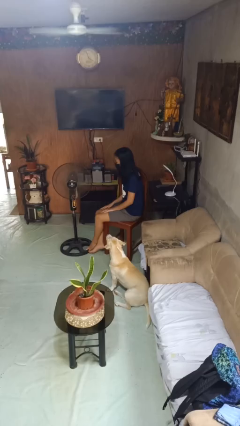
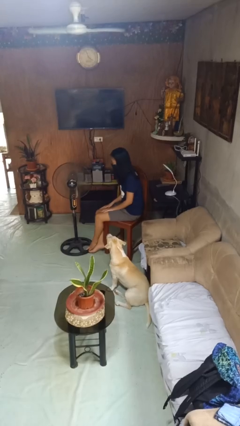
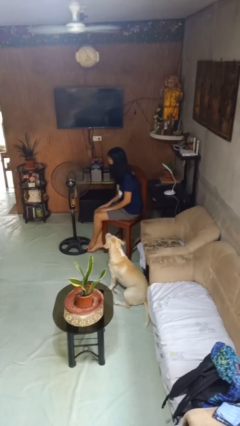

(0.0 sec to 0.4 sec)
person turns on fan

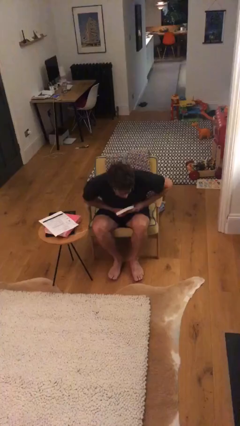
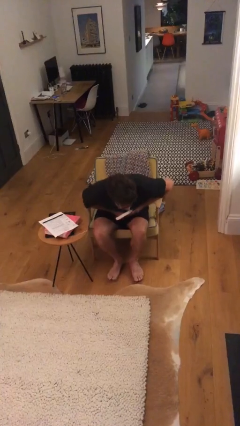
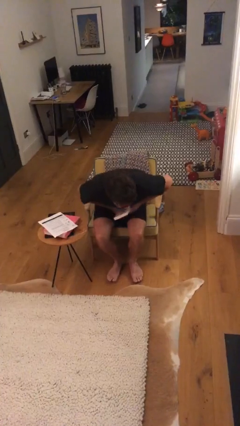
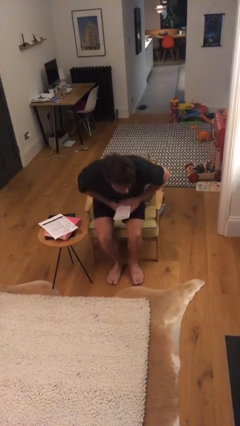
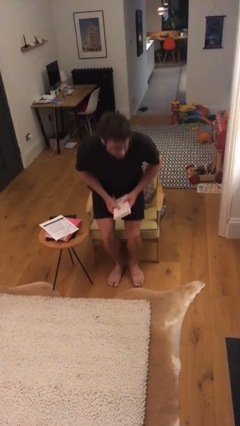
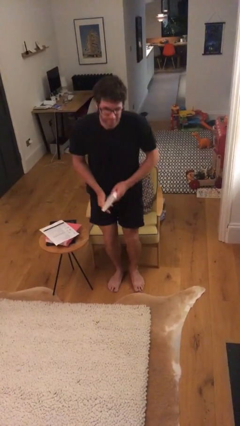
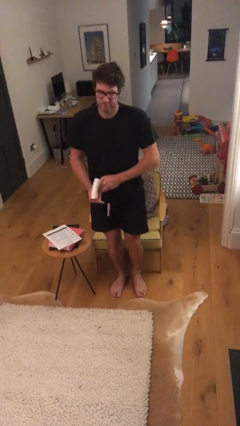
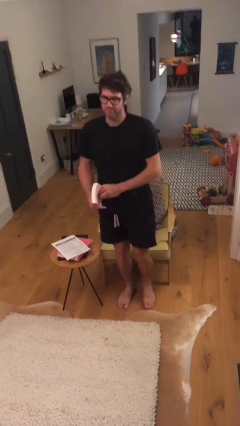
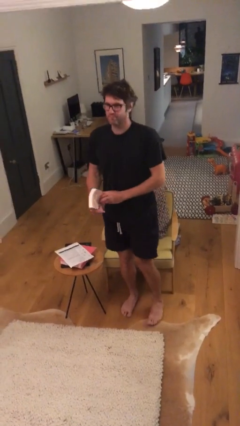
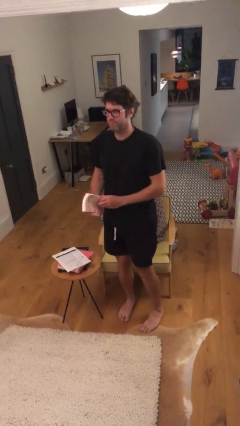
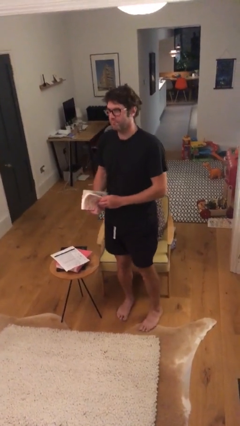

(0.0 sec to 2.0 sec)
person stands up

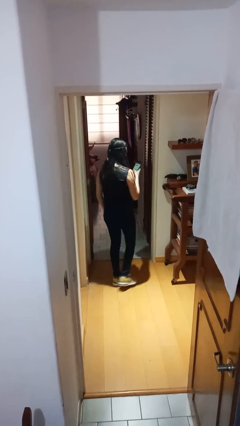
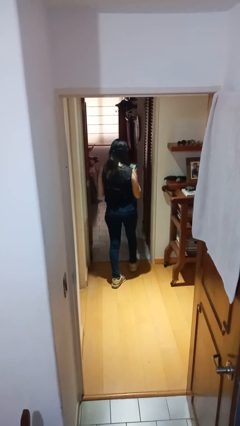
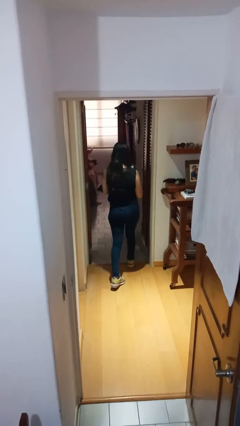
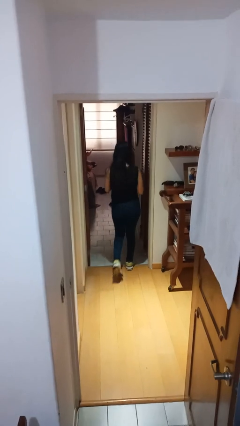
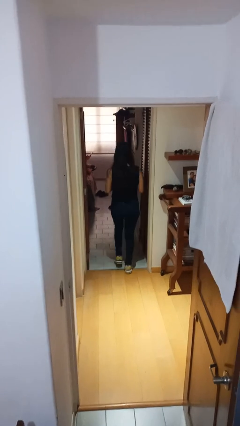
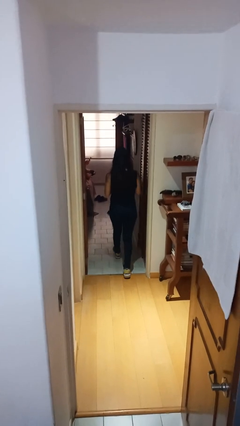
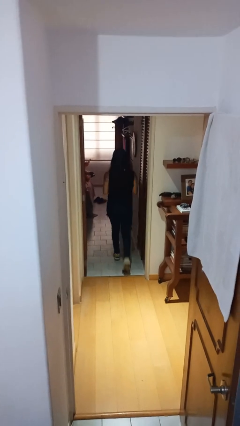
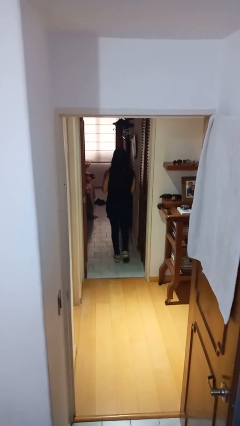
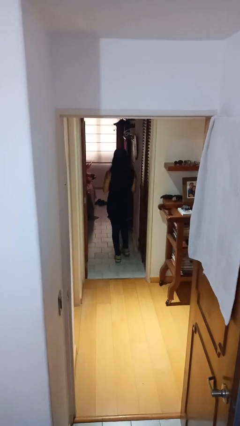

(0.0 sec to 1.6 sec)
person exits scene through structure

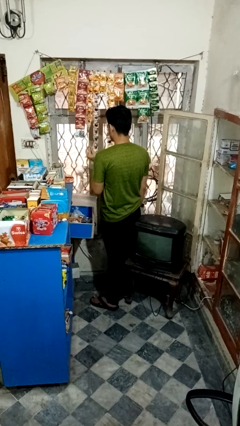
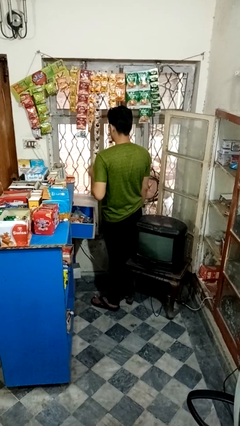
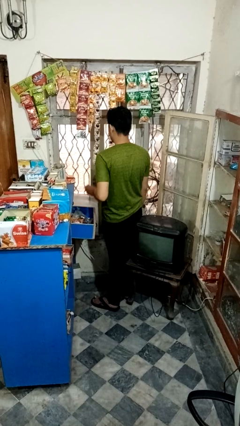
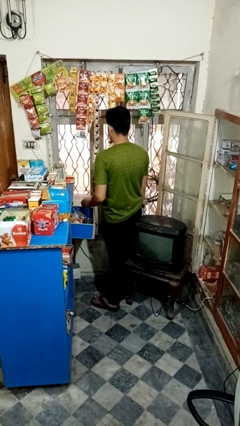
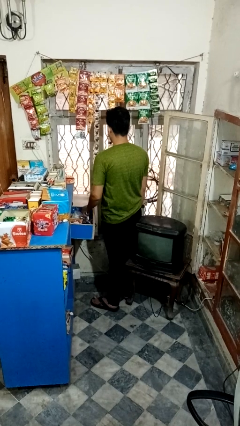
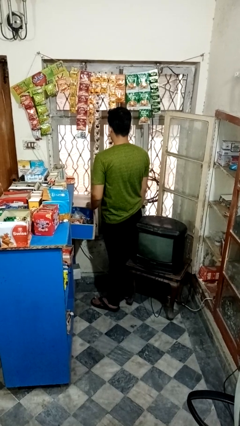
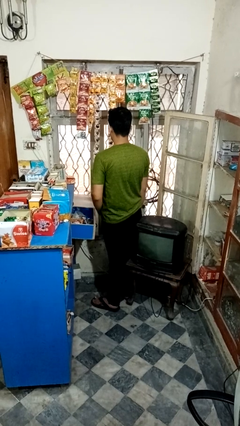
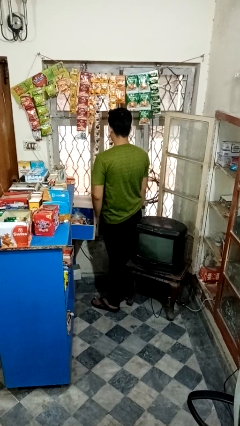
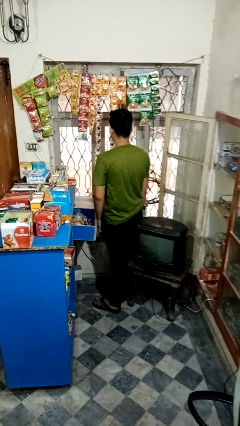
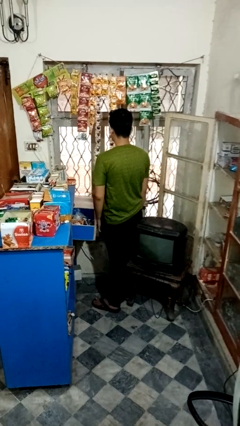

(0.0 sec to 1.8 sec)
person puts object into kitchen drawer

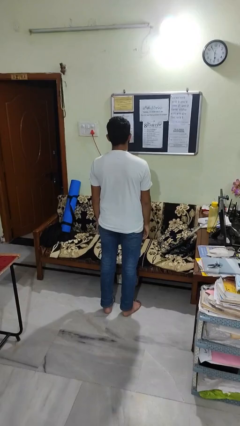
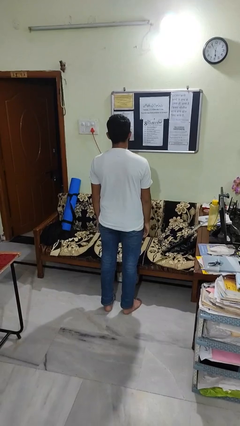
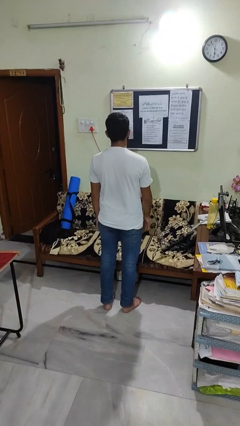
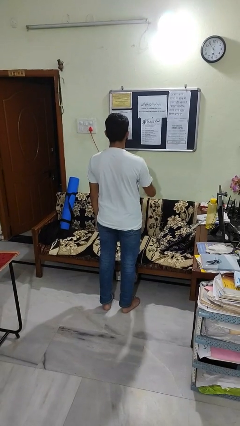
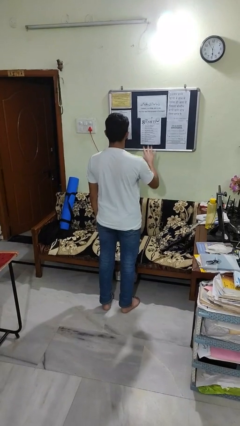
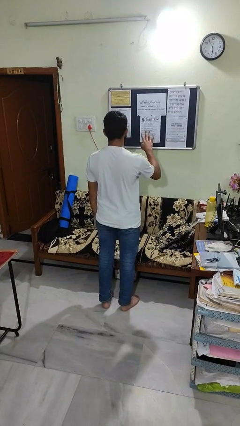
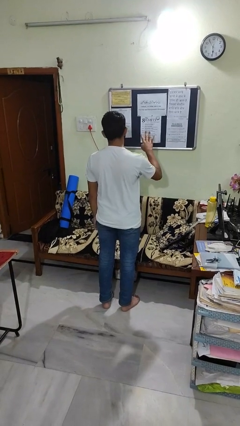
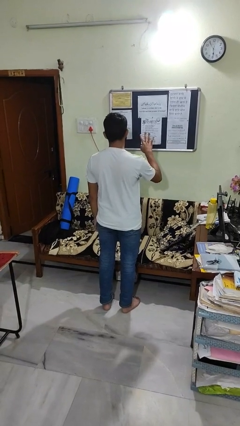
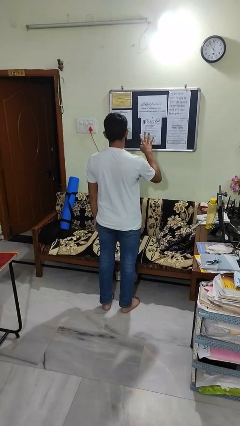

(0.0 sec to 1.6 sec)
person gestures number four

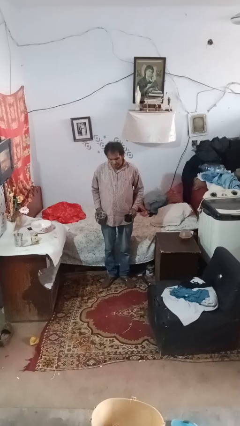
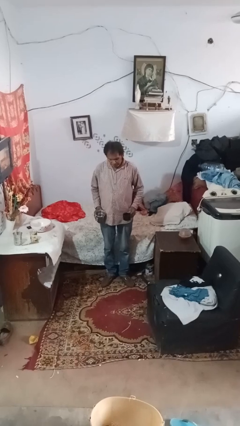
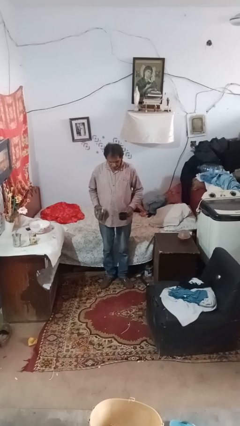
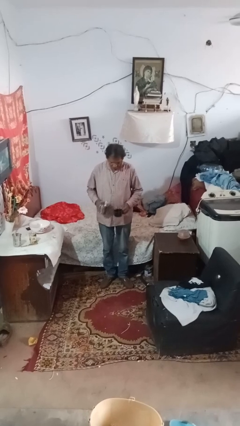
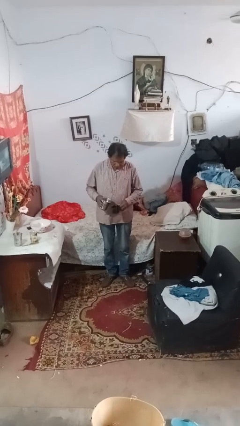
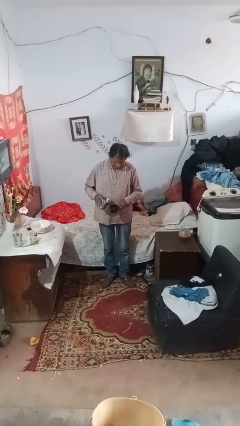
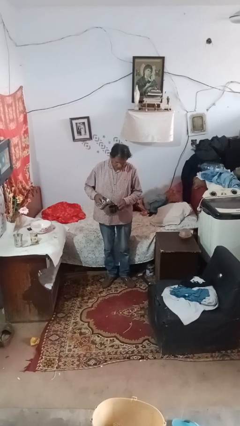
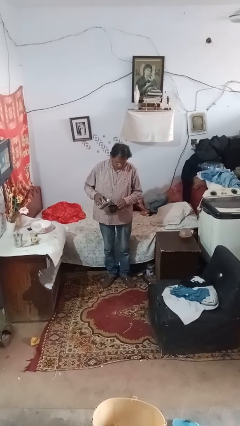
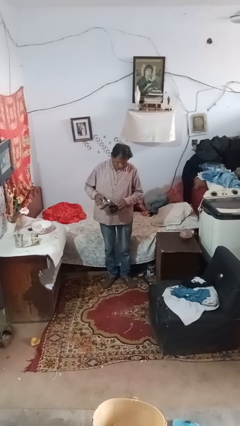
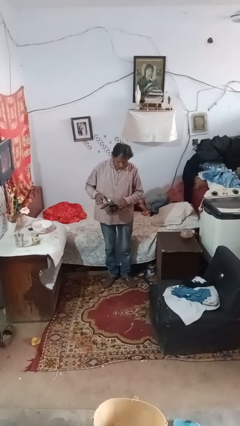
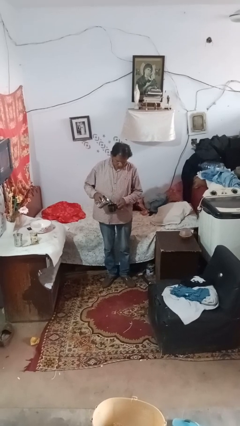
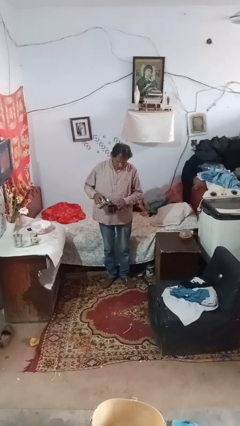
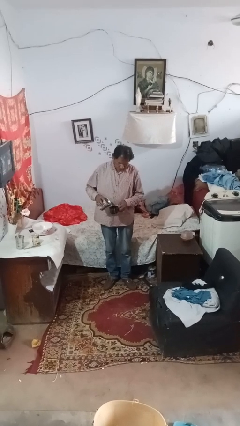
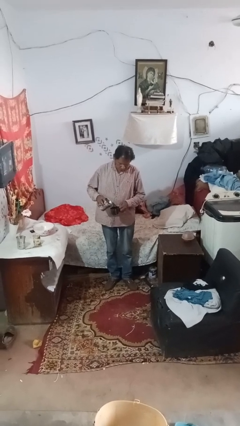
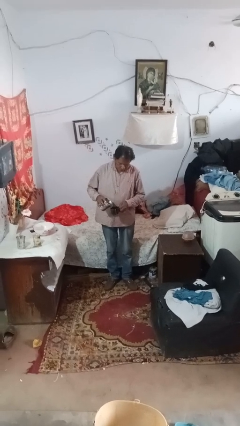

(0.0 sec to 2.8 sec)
person pours liquid into cup

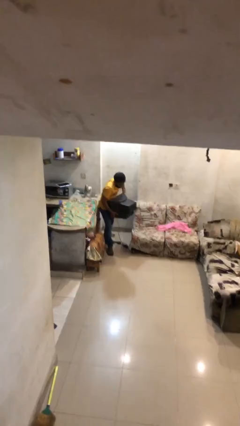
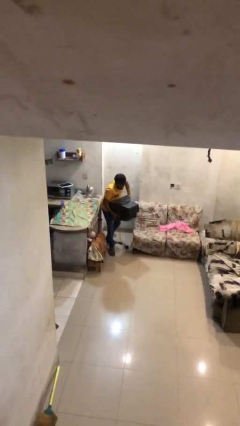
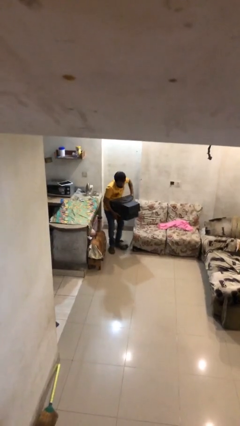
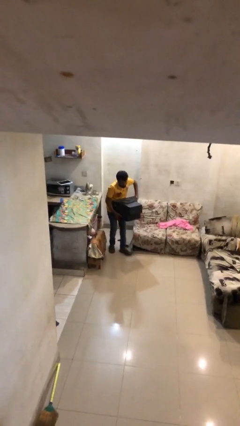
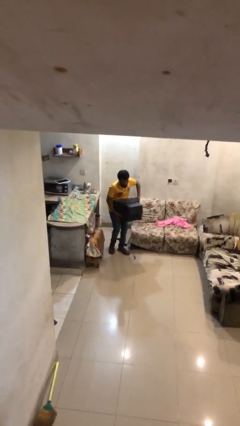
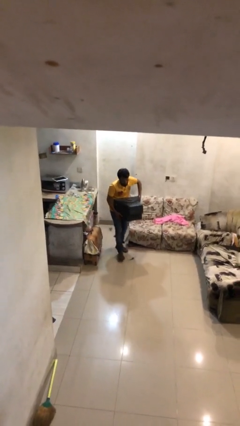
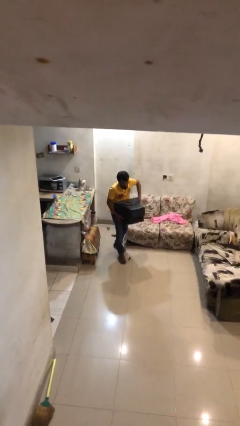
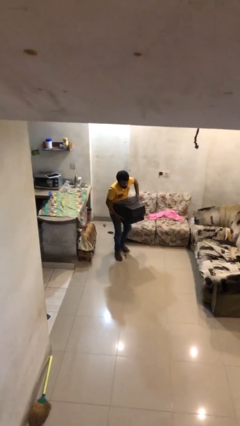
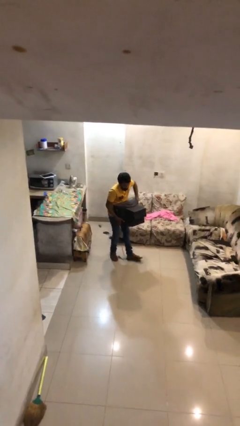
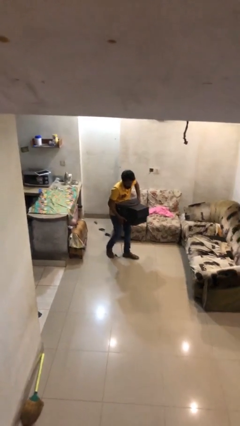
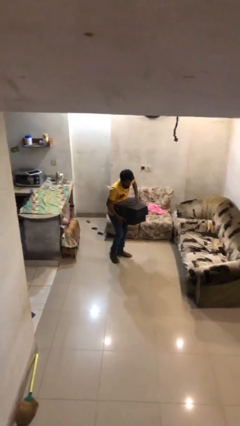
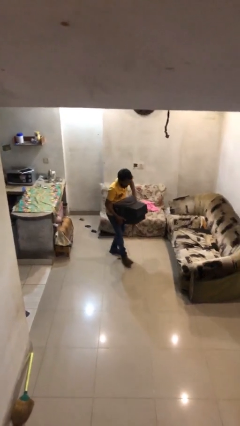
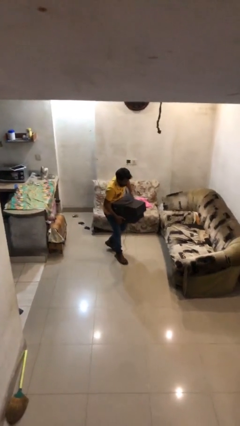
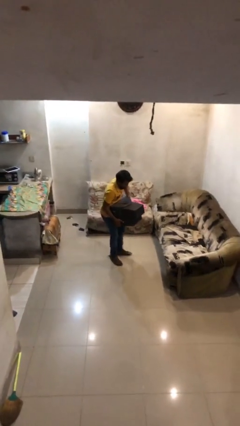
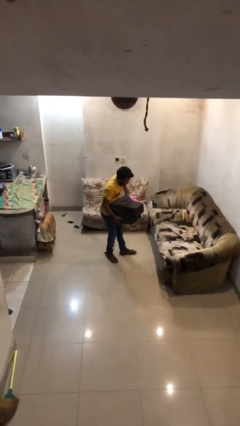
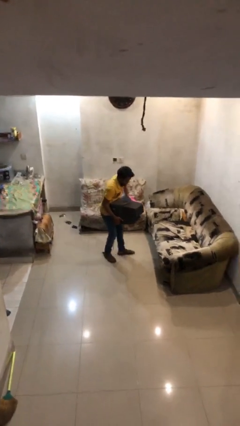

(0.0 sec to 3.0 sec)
person carries heavy object

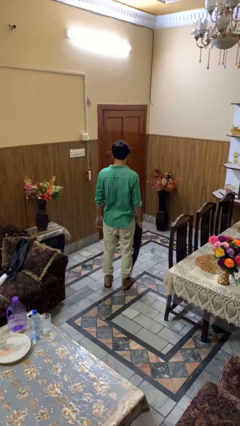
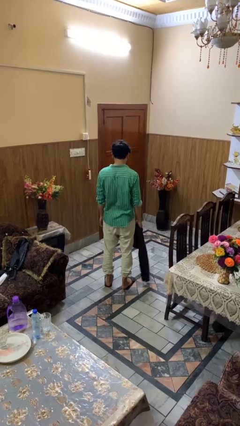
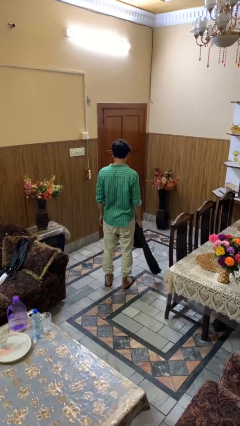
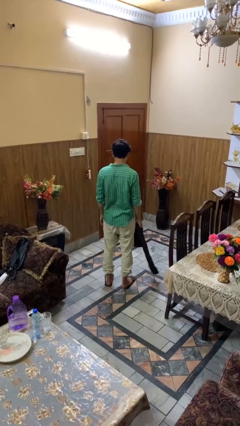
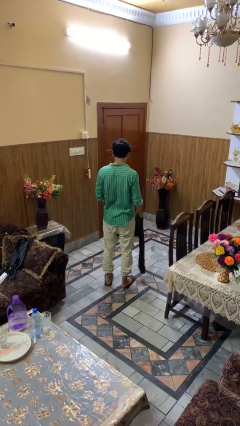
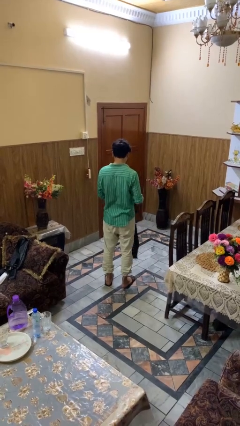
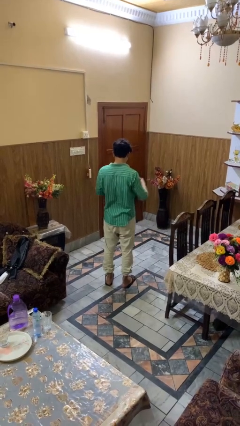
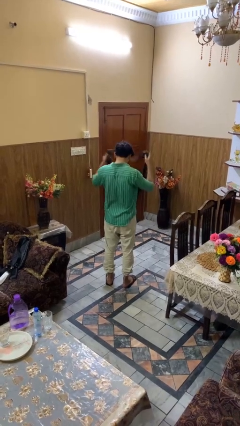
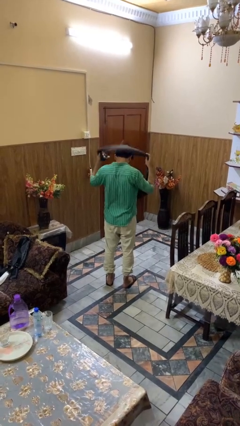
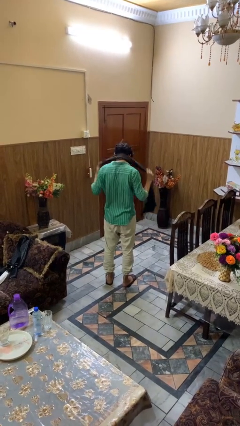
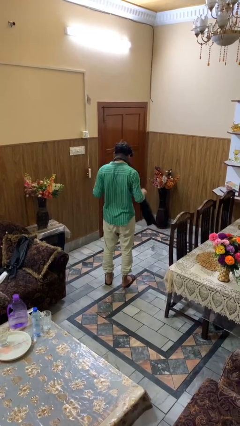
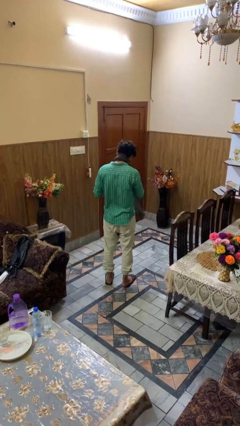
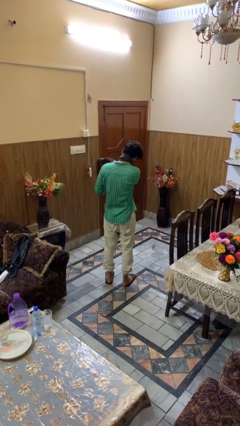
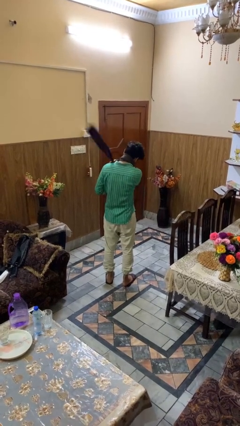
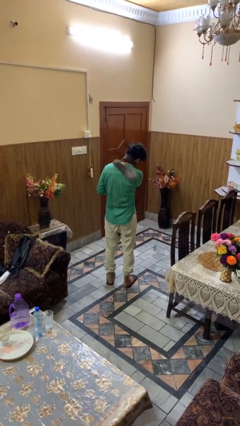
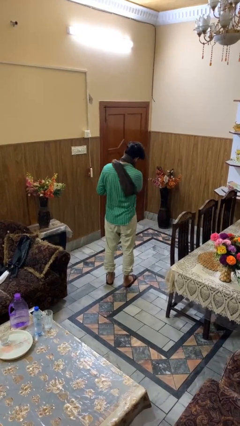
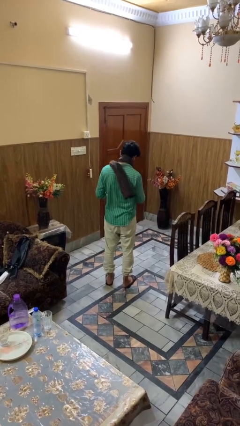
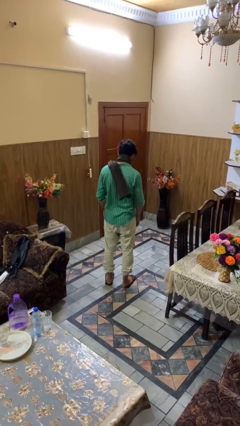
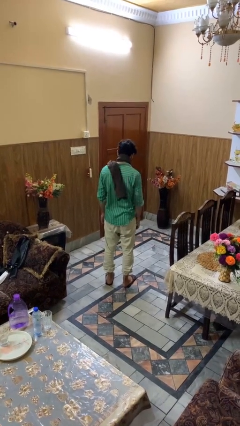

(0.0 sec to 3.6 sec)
person puts on scarf
